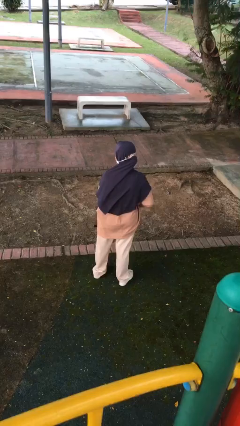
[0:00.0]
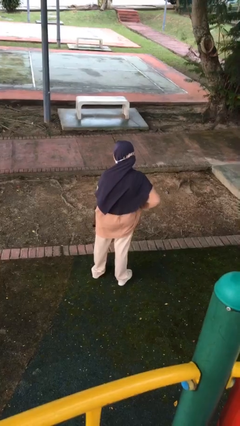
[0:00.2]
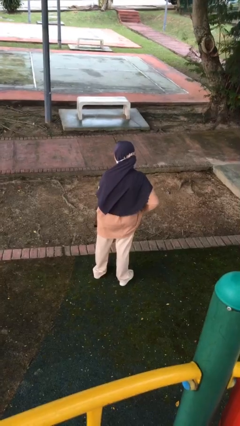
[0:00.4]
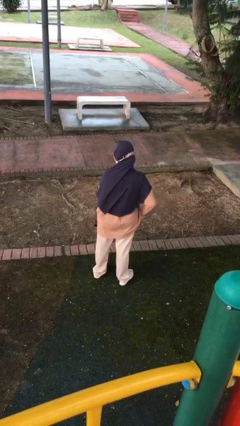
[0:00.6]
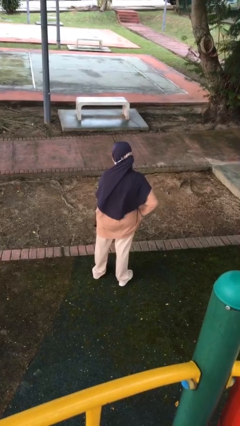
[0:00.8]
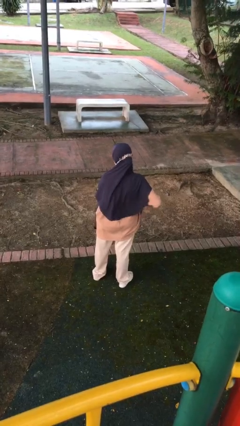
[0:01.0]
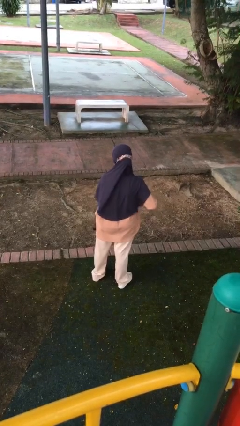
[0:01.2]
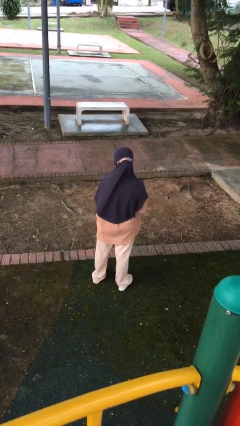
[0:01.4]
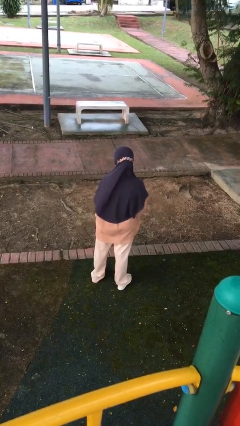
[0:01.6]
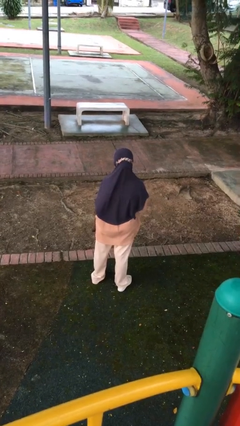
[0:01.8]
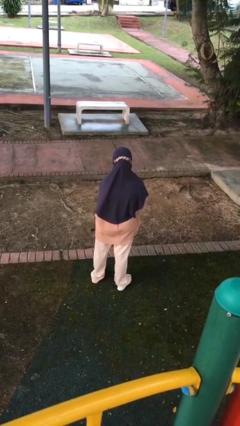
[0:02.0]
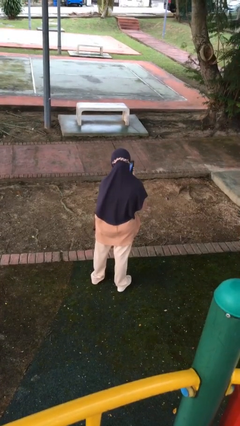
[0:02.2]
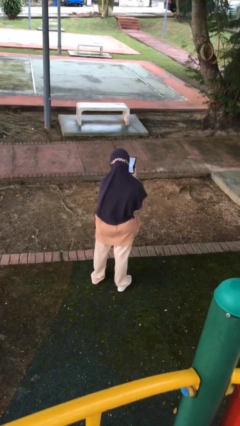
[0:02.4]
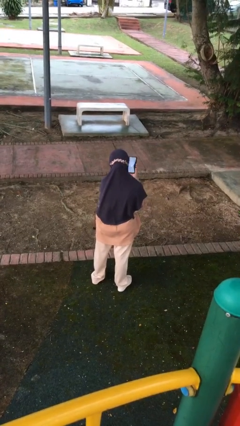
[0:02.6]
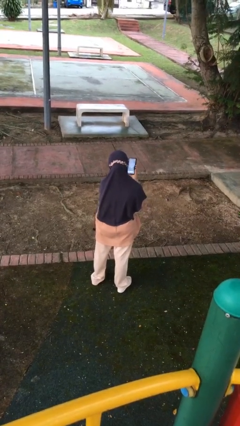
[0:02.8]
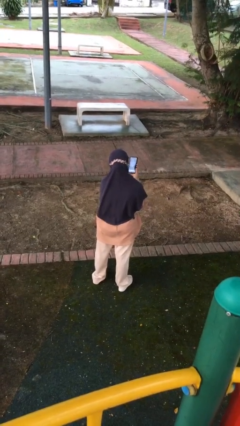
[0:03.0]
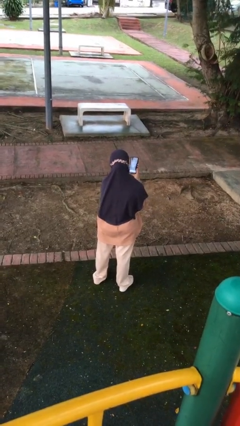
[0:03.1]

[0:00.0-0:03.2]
person takes phone from pocket

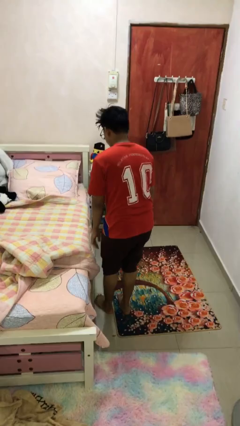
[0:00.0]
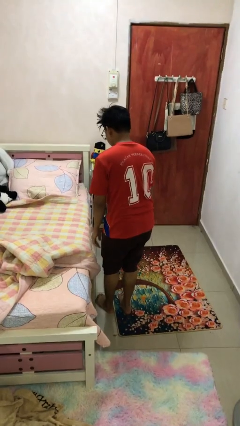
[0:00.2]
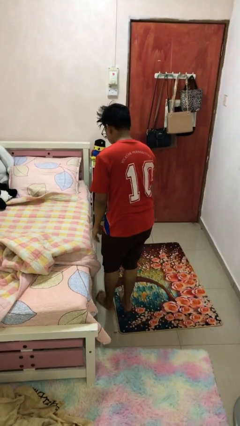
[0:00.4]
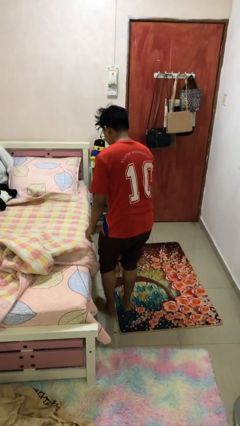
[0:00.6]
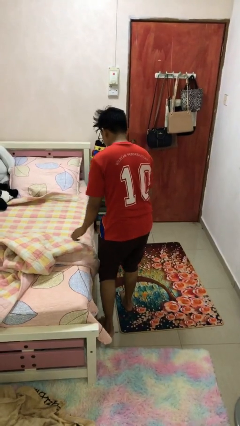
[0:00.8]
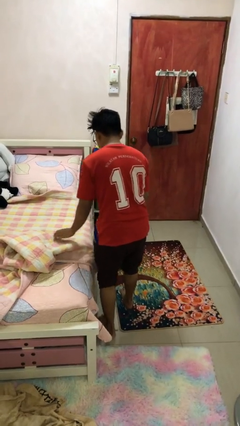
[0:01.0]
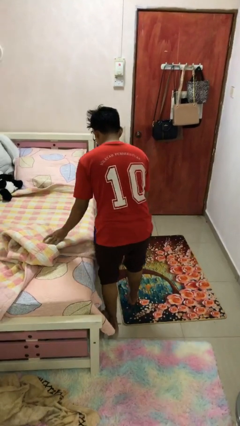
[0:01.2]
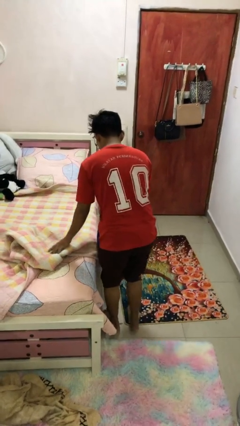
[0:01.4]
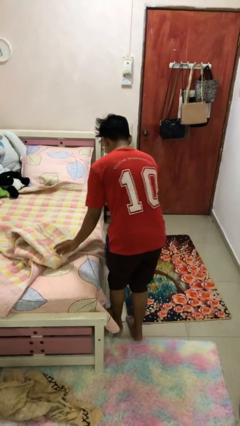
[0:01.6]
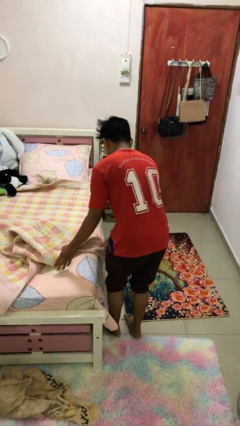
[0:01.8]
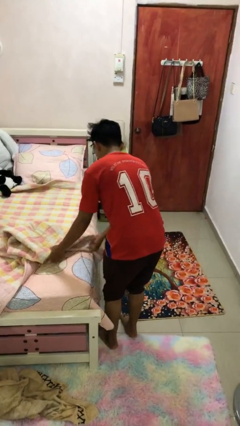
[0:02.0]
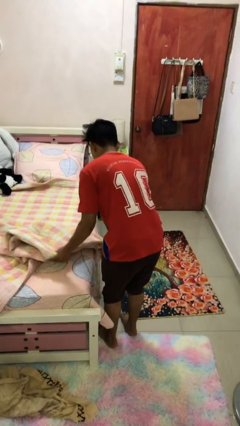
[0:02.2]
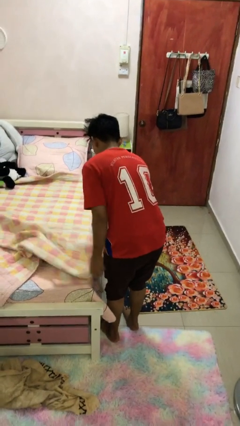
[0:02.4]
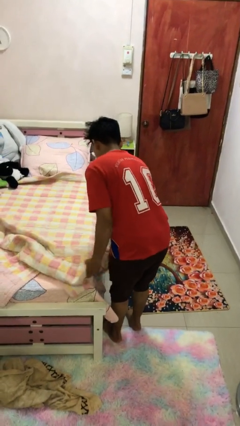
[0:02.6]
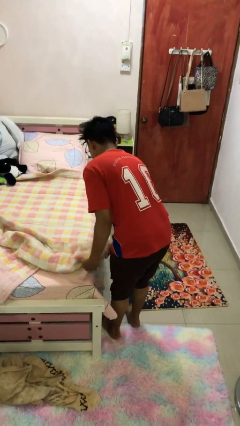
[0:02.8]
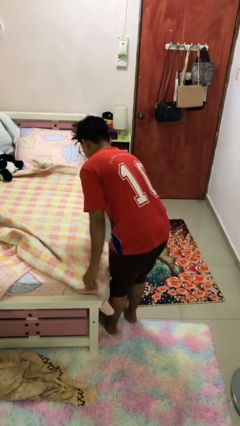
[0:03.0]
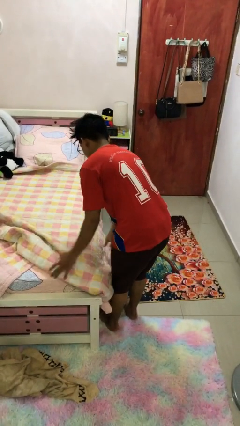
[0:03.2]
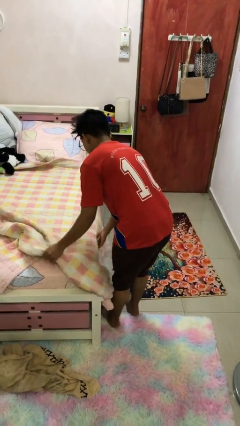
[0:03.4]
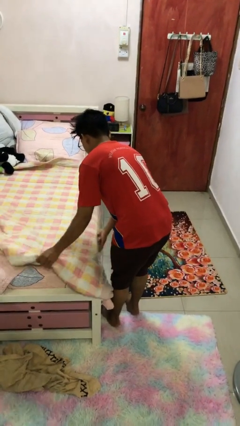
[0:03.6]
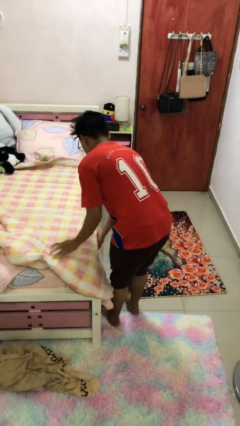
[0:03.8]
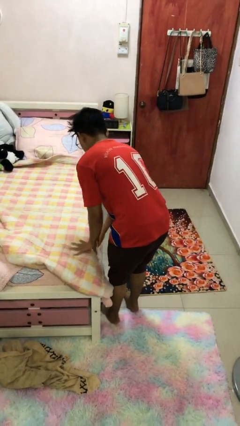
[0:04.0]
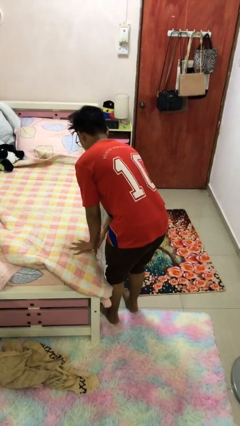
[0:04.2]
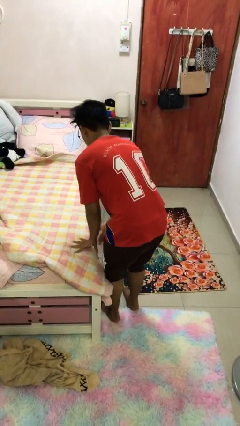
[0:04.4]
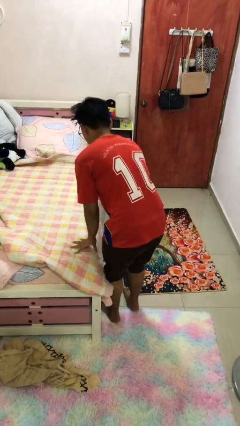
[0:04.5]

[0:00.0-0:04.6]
person makes bed

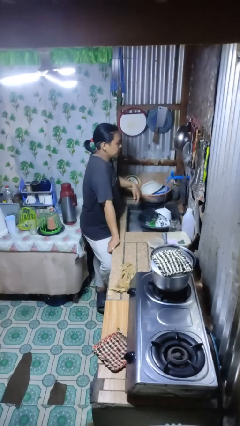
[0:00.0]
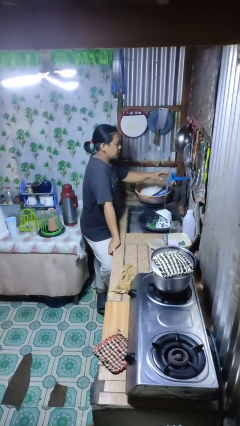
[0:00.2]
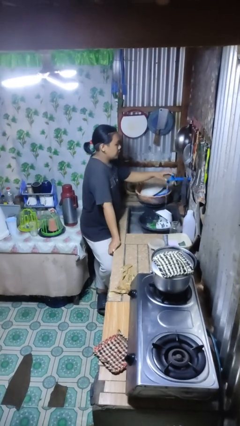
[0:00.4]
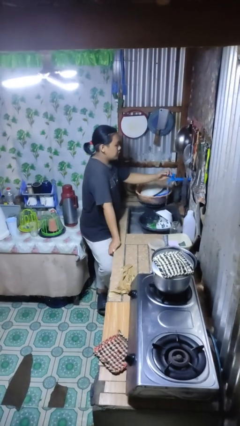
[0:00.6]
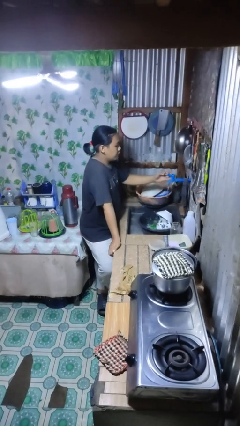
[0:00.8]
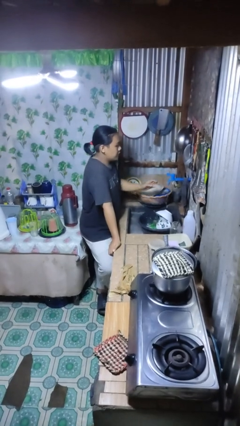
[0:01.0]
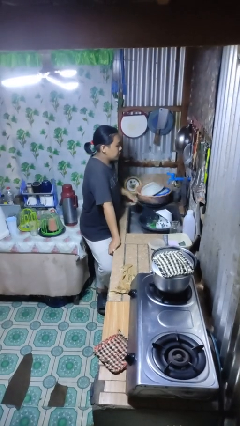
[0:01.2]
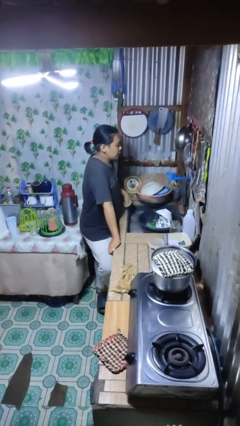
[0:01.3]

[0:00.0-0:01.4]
person turns off faucet

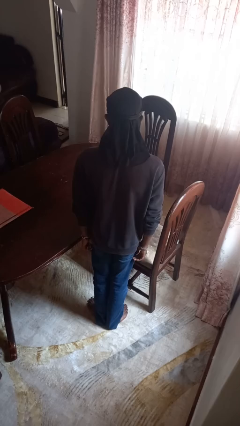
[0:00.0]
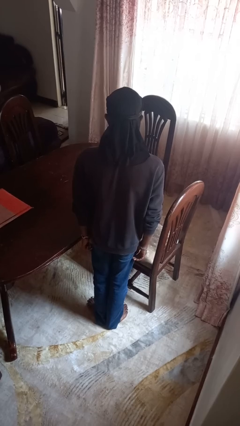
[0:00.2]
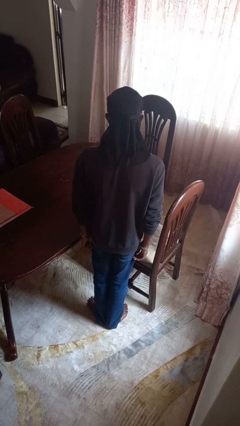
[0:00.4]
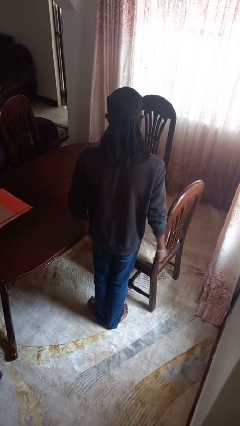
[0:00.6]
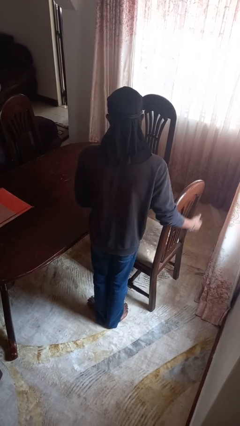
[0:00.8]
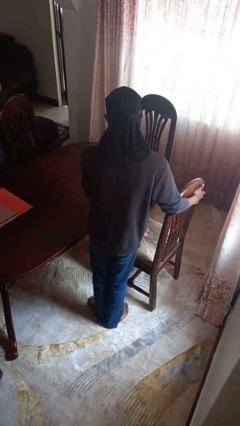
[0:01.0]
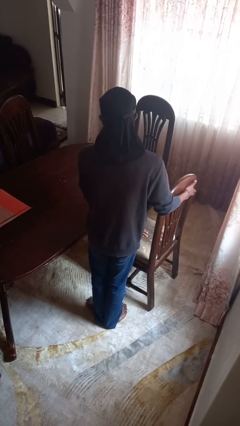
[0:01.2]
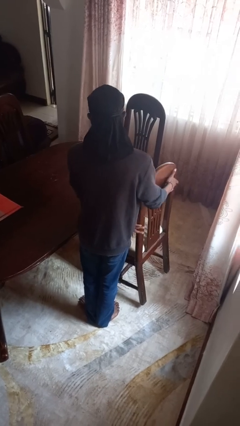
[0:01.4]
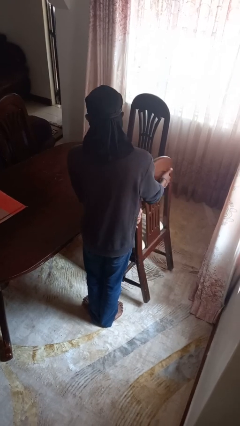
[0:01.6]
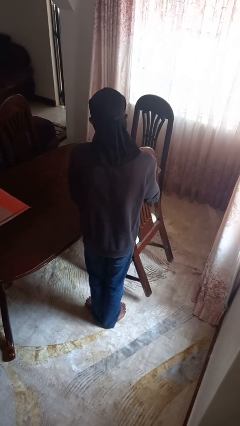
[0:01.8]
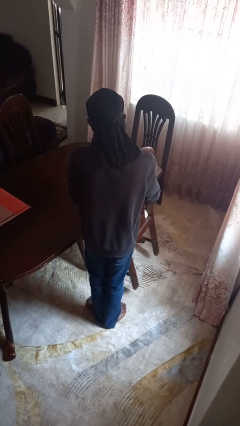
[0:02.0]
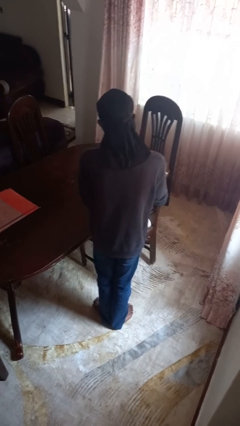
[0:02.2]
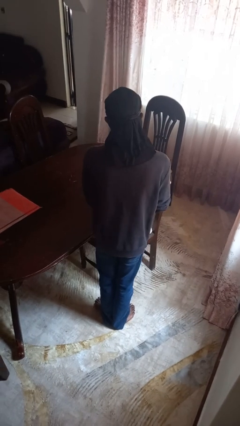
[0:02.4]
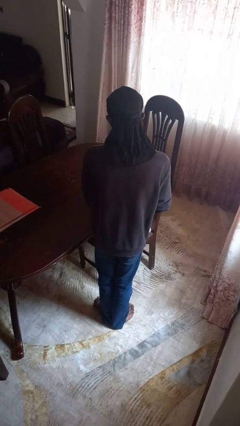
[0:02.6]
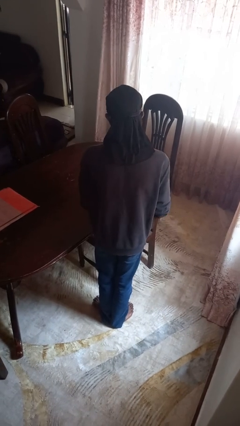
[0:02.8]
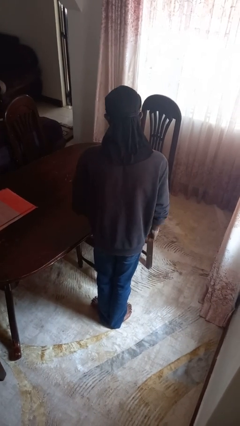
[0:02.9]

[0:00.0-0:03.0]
person pushes in chair

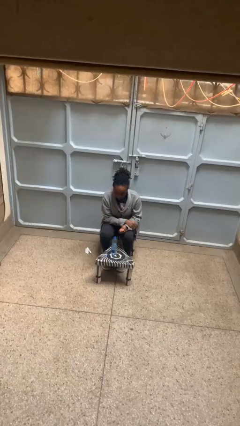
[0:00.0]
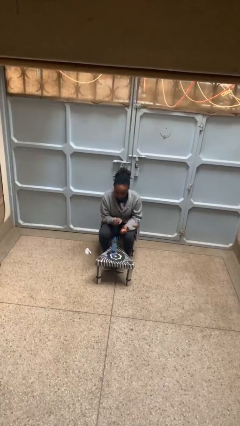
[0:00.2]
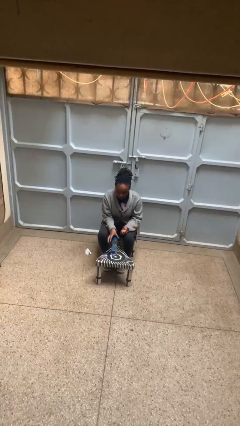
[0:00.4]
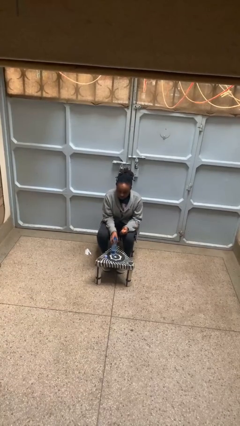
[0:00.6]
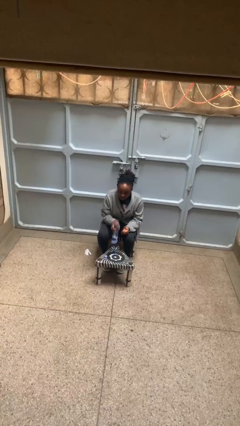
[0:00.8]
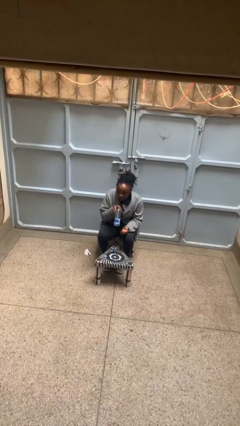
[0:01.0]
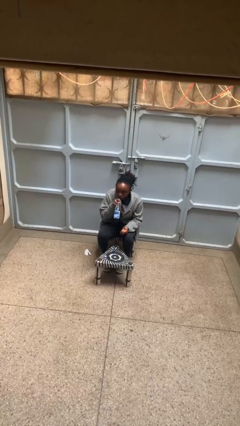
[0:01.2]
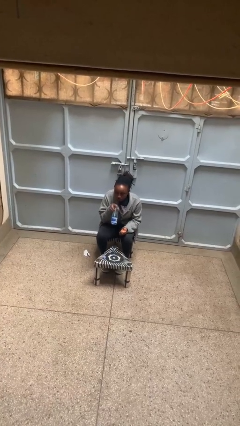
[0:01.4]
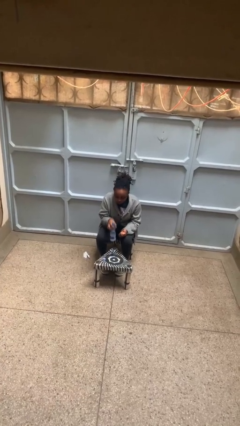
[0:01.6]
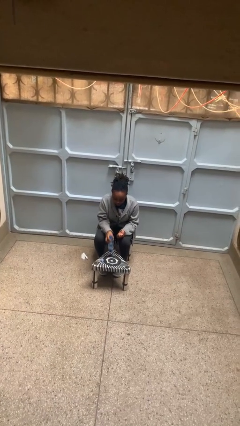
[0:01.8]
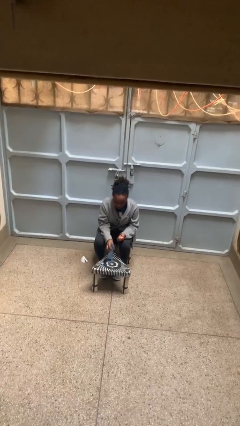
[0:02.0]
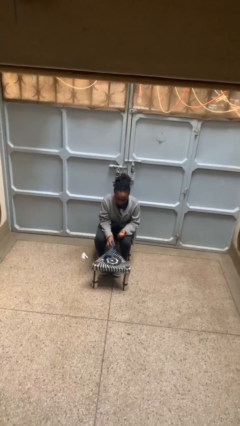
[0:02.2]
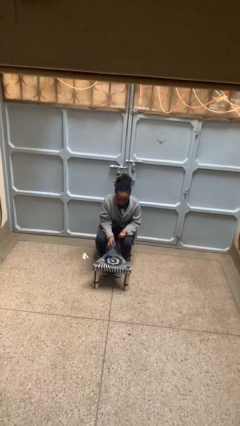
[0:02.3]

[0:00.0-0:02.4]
person drinks from cup

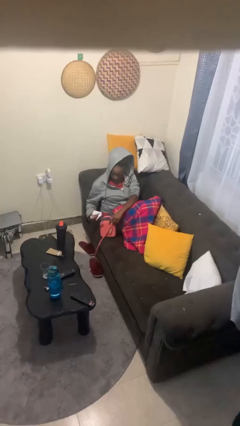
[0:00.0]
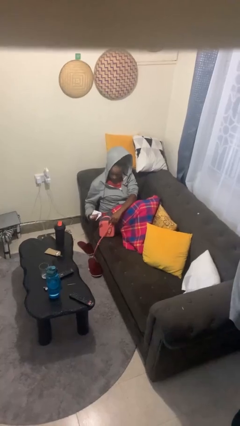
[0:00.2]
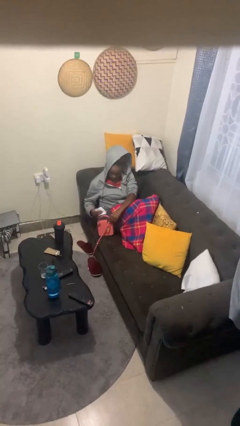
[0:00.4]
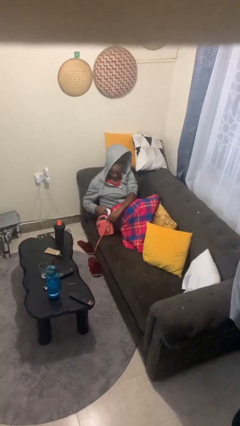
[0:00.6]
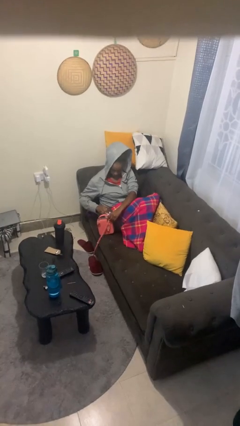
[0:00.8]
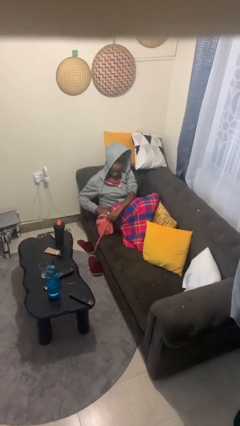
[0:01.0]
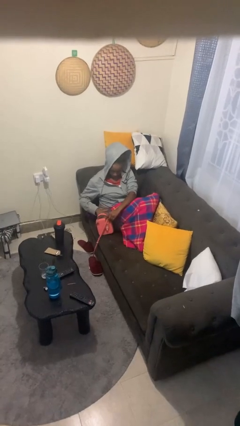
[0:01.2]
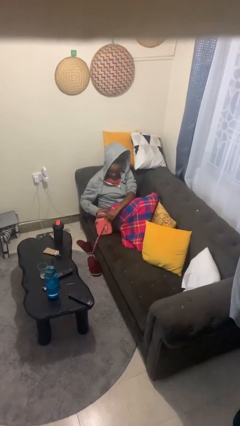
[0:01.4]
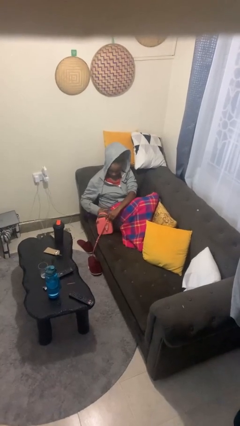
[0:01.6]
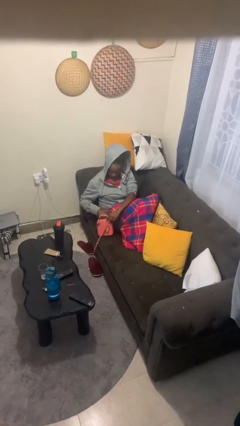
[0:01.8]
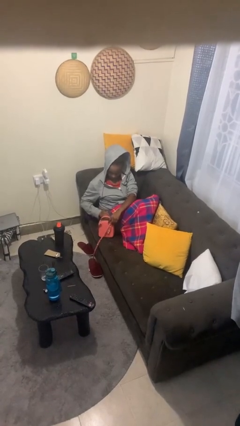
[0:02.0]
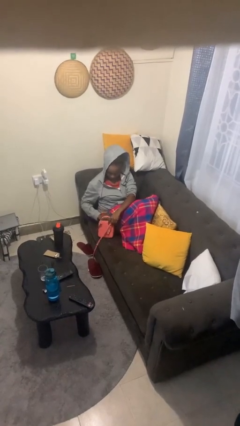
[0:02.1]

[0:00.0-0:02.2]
person puts object into purse

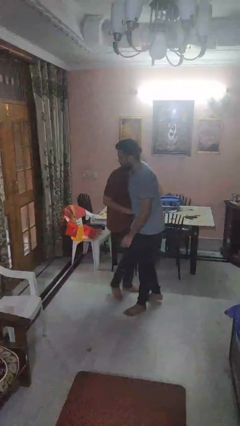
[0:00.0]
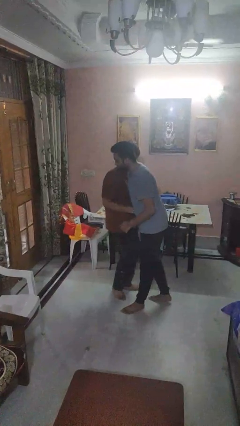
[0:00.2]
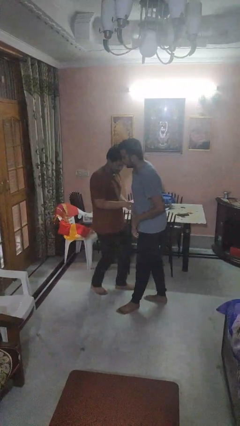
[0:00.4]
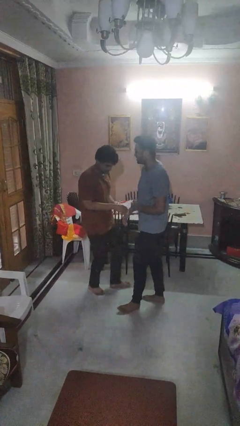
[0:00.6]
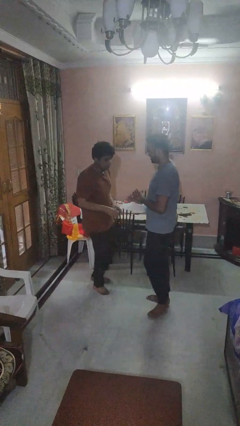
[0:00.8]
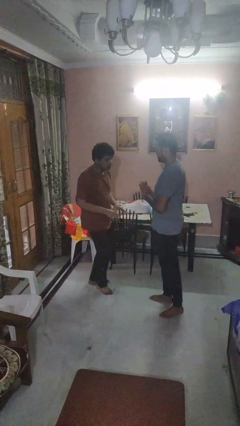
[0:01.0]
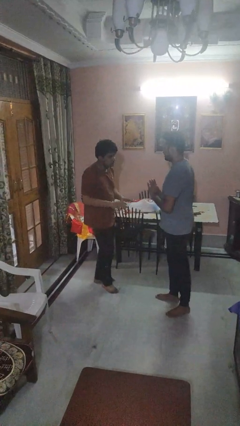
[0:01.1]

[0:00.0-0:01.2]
person bumps into person
